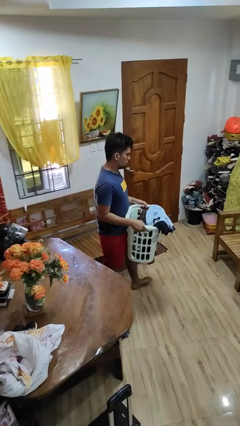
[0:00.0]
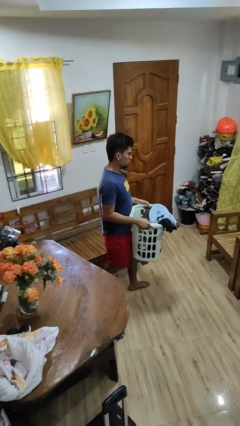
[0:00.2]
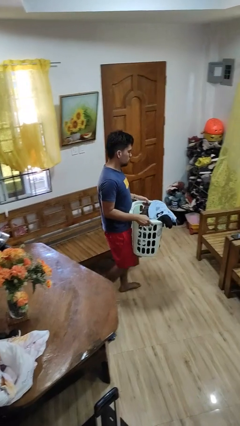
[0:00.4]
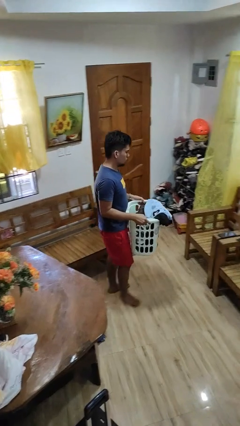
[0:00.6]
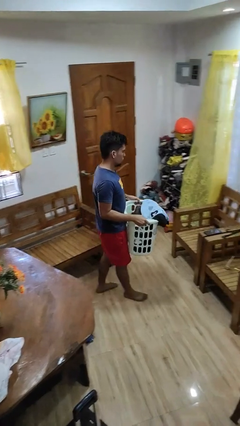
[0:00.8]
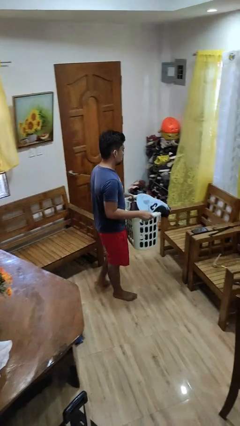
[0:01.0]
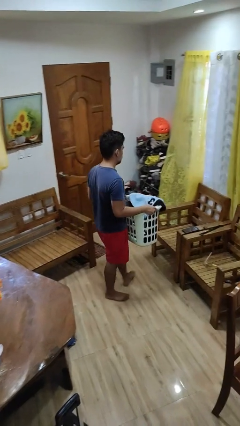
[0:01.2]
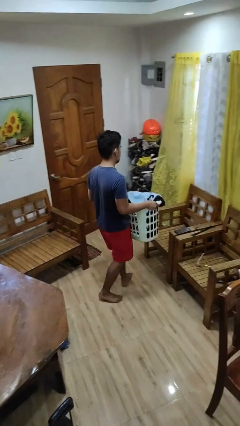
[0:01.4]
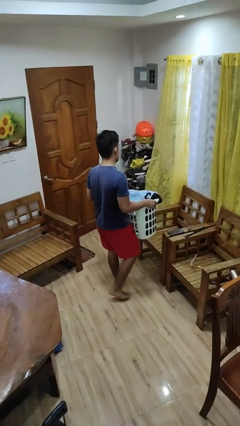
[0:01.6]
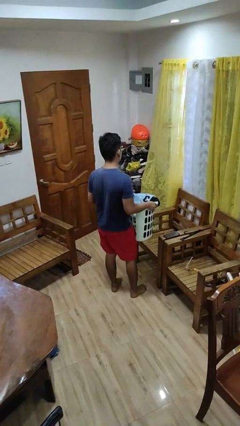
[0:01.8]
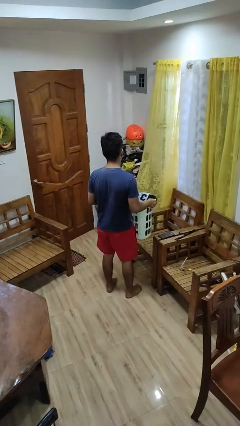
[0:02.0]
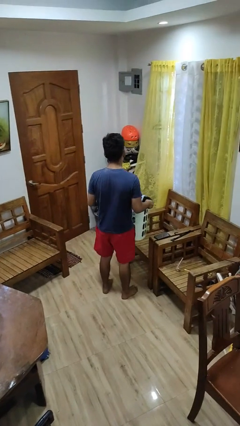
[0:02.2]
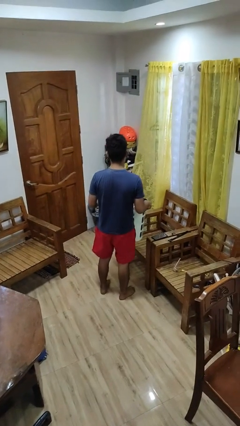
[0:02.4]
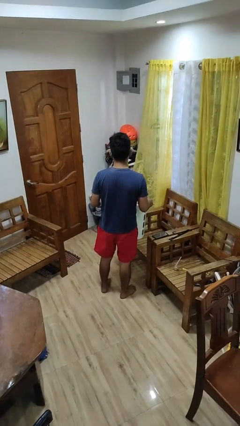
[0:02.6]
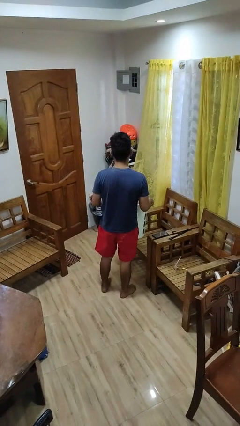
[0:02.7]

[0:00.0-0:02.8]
person carries laundry basket

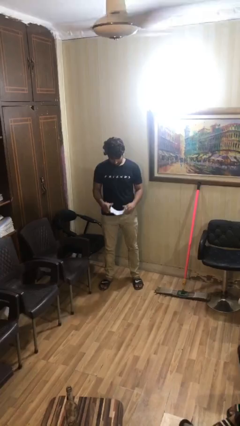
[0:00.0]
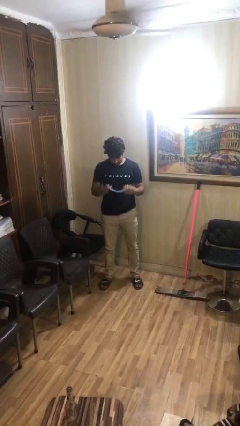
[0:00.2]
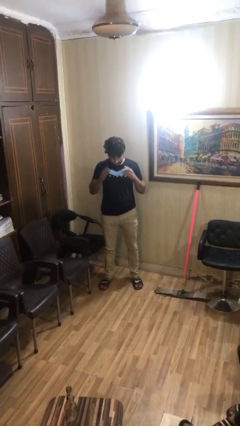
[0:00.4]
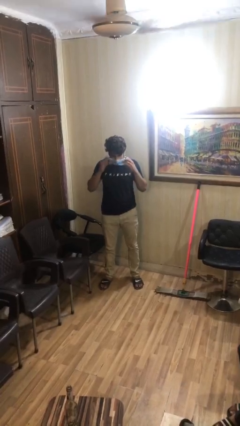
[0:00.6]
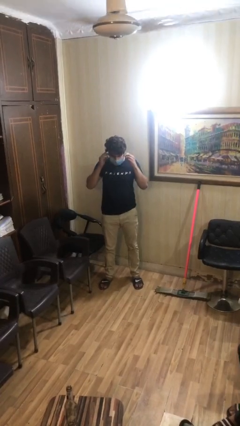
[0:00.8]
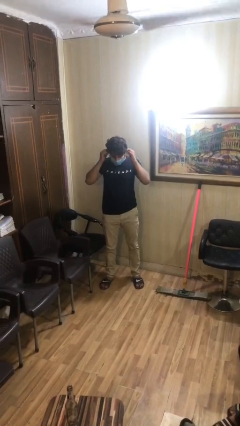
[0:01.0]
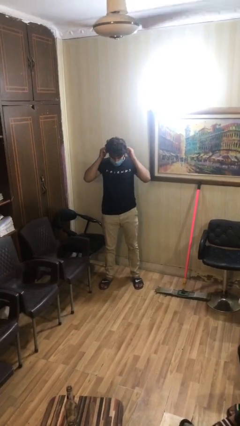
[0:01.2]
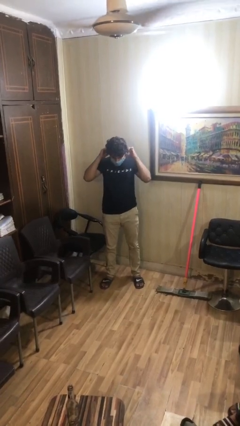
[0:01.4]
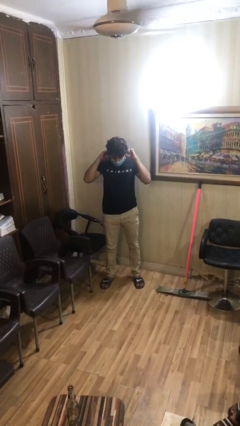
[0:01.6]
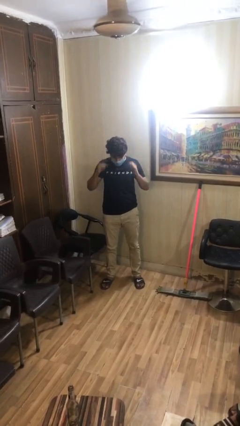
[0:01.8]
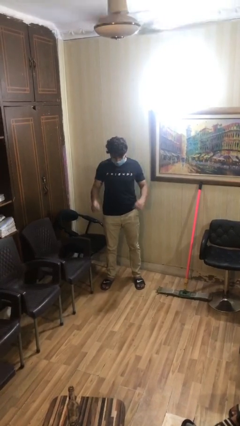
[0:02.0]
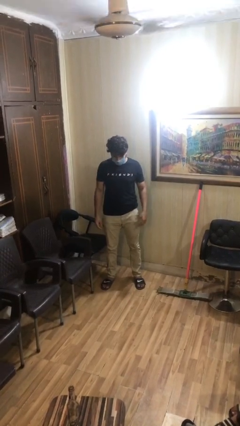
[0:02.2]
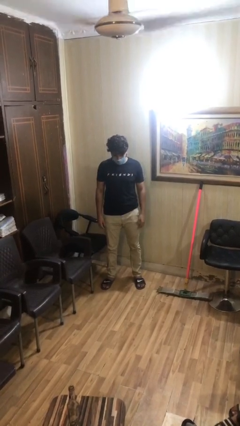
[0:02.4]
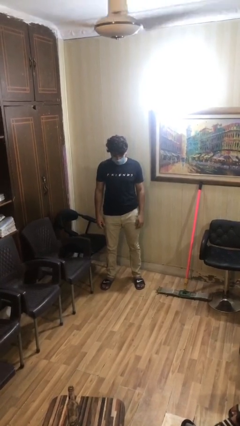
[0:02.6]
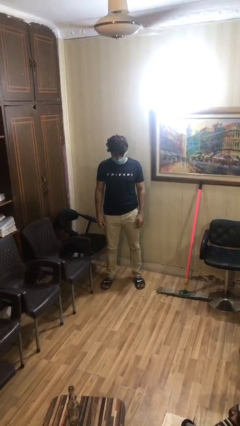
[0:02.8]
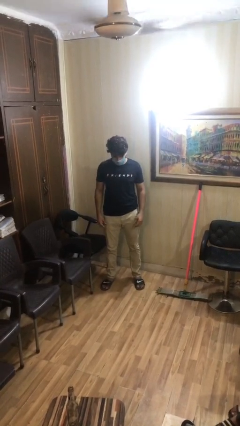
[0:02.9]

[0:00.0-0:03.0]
person puts on facemask

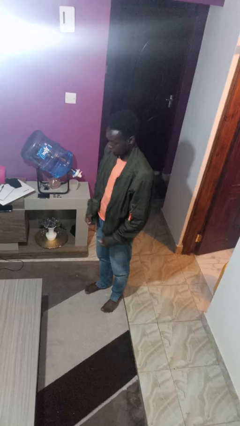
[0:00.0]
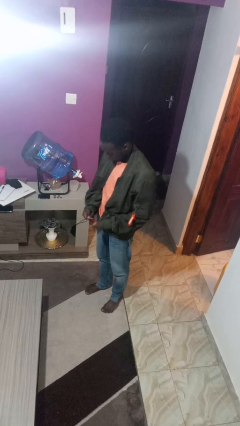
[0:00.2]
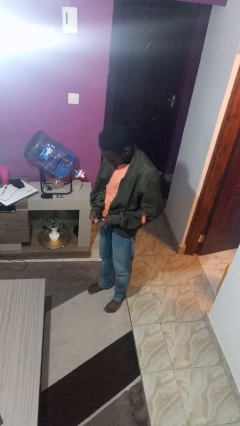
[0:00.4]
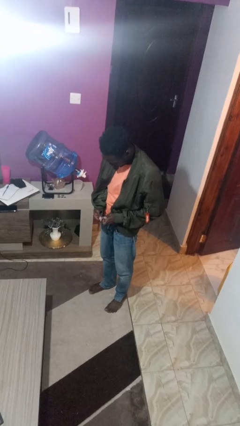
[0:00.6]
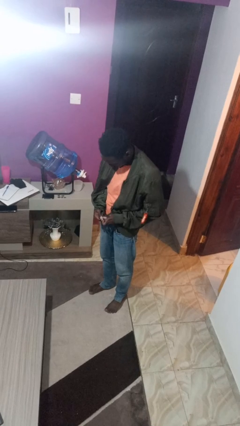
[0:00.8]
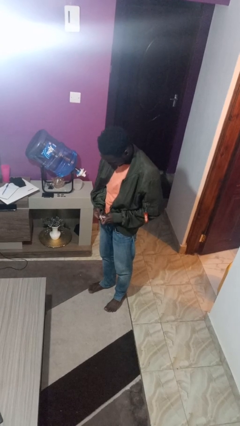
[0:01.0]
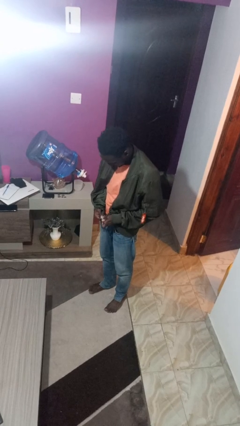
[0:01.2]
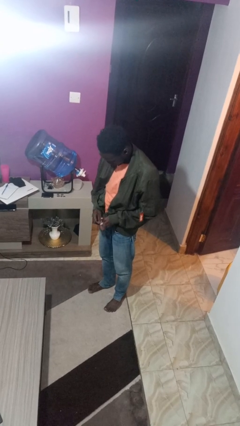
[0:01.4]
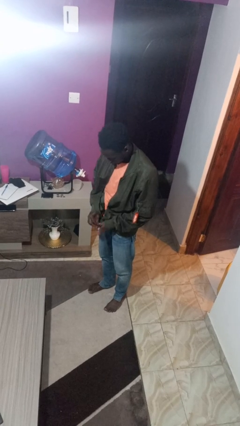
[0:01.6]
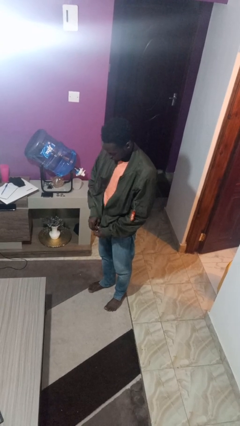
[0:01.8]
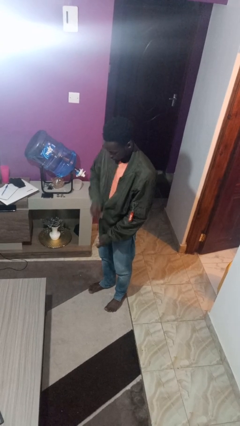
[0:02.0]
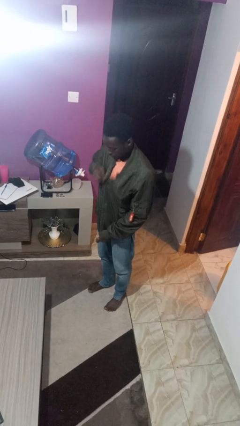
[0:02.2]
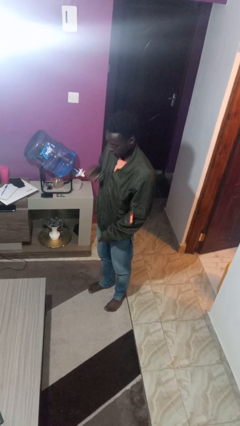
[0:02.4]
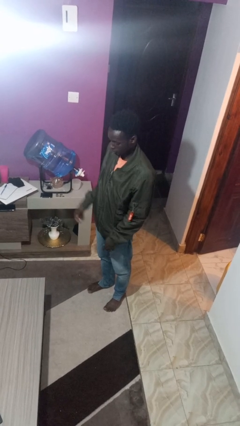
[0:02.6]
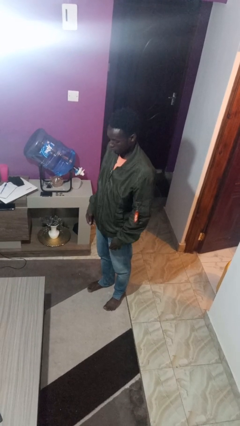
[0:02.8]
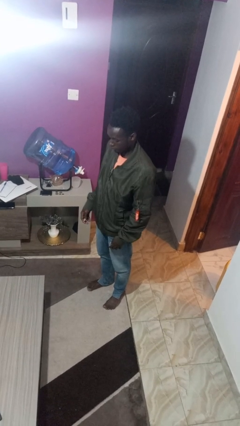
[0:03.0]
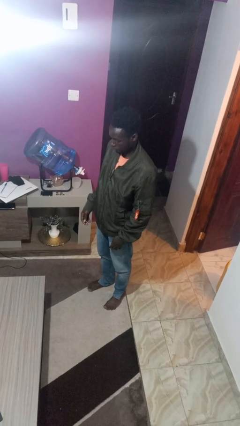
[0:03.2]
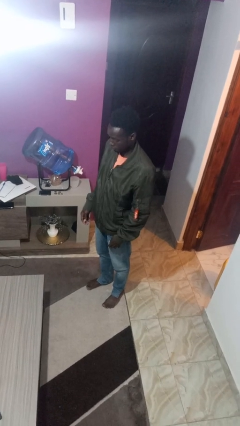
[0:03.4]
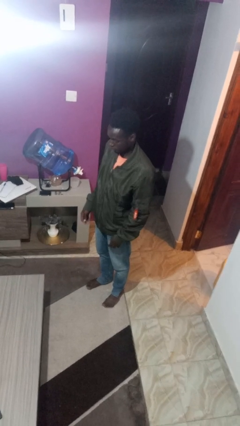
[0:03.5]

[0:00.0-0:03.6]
person zips up jacket

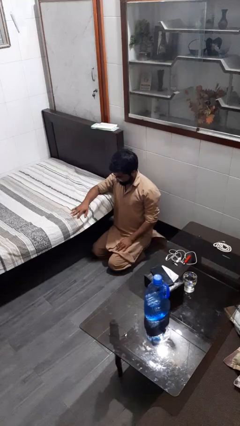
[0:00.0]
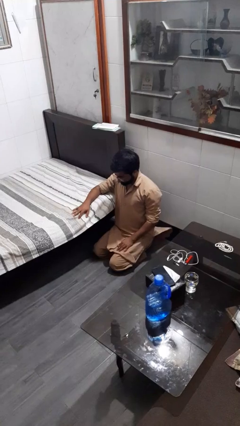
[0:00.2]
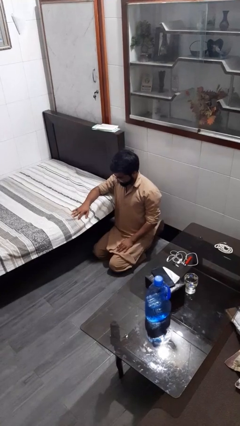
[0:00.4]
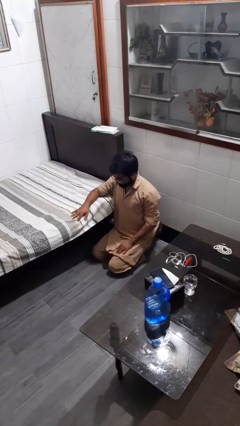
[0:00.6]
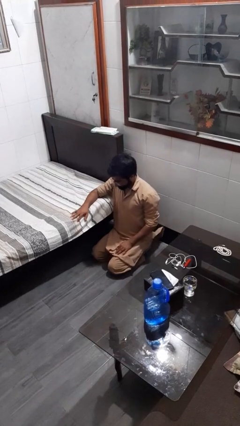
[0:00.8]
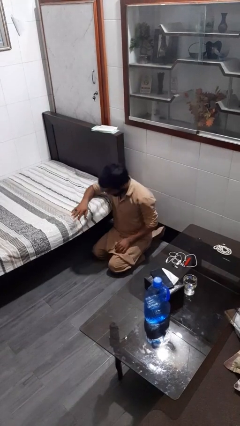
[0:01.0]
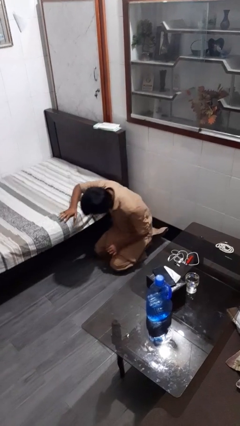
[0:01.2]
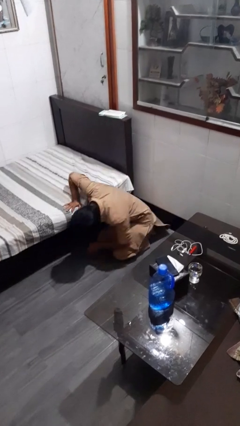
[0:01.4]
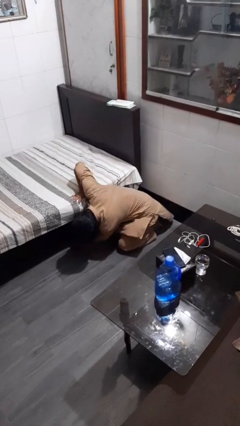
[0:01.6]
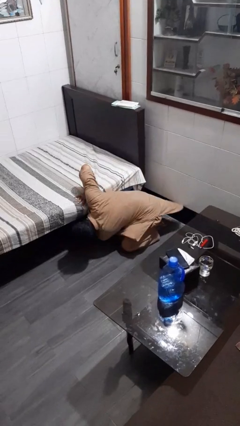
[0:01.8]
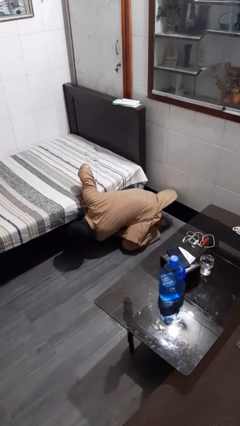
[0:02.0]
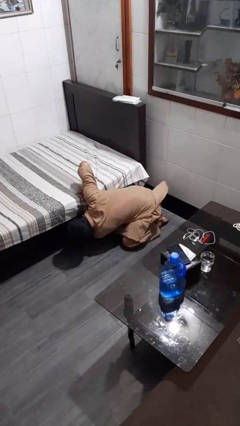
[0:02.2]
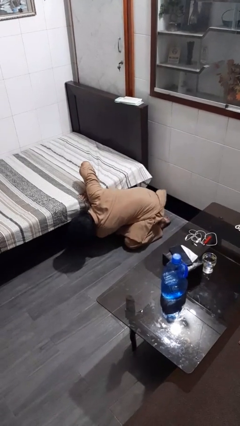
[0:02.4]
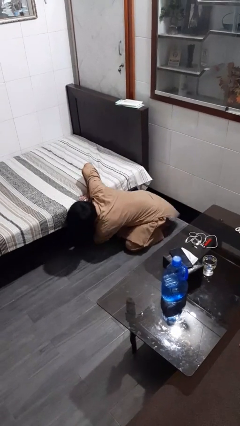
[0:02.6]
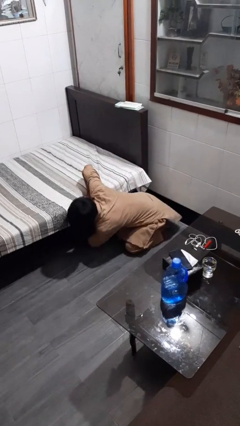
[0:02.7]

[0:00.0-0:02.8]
person searches under bed

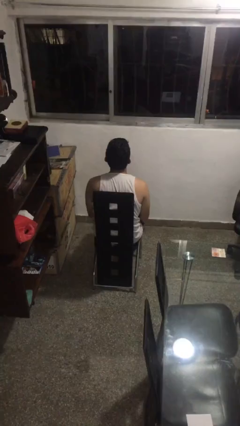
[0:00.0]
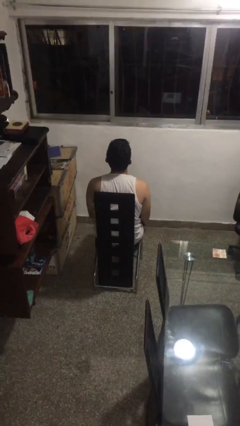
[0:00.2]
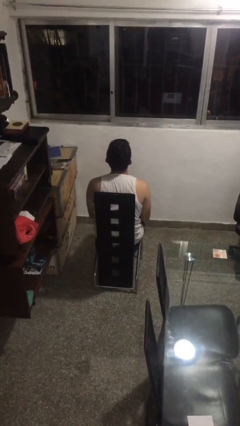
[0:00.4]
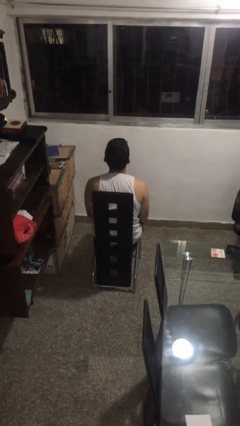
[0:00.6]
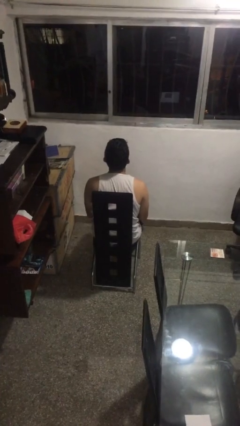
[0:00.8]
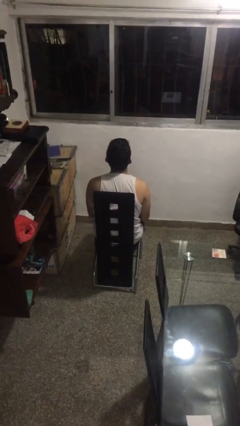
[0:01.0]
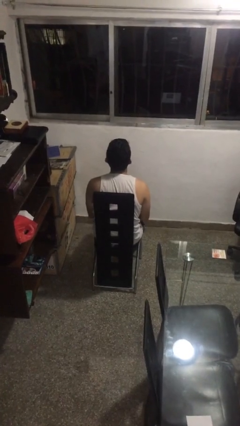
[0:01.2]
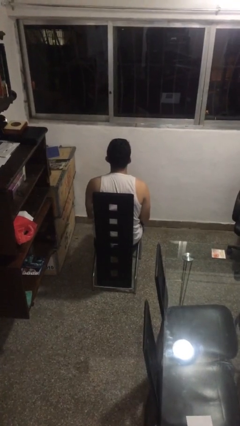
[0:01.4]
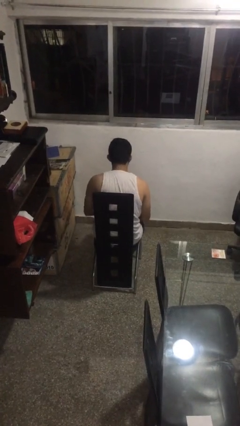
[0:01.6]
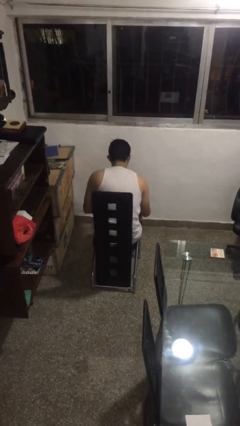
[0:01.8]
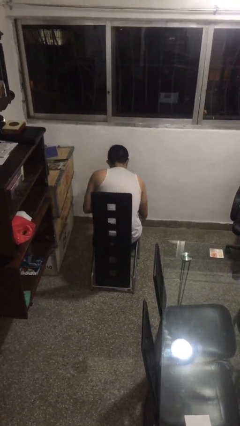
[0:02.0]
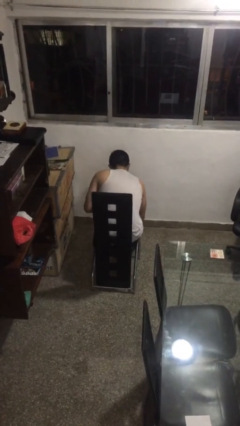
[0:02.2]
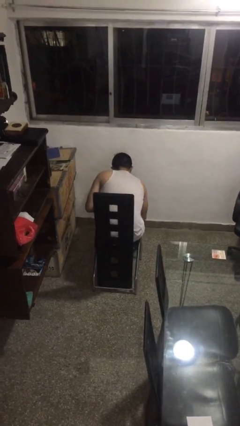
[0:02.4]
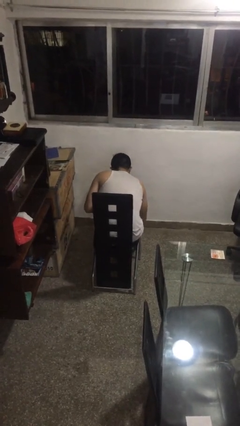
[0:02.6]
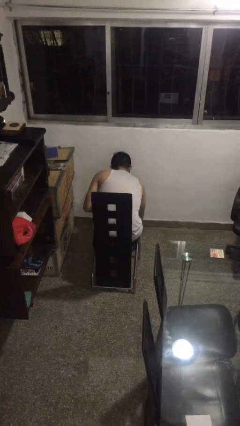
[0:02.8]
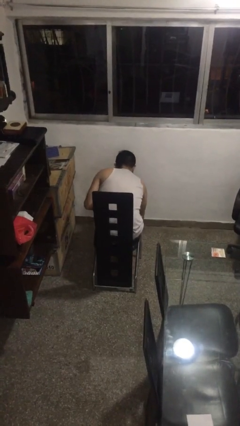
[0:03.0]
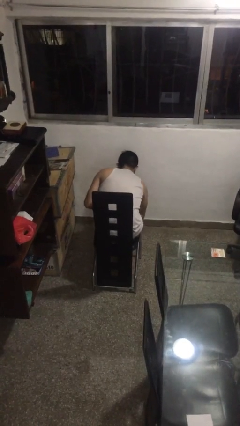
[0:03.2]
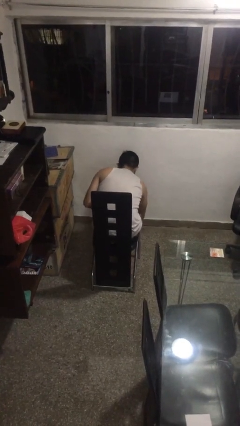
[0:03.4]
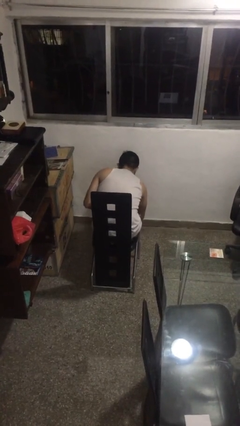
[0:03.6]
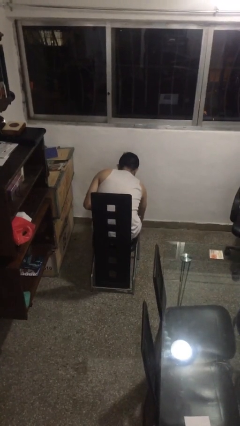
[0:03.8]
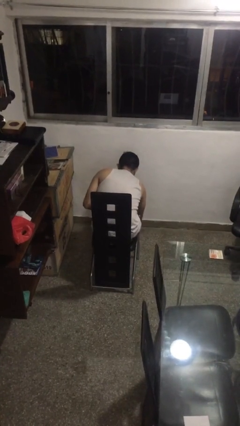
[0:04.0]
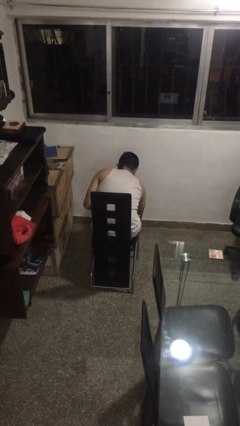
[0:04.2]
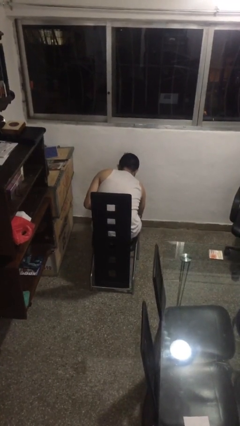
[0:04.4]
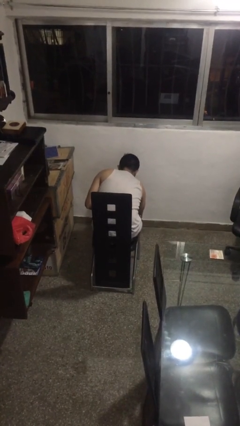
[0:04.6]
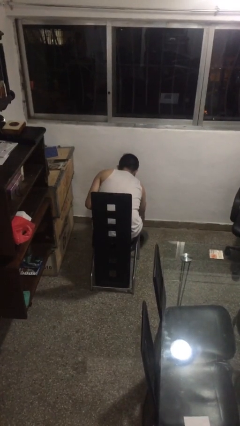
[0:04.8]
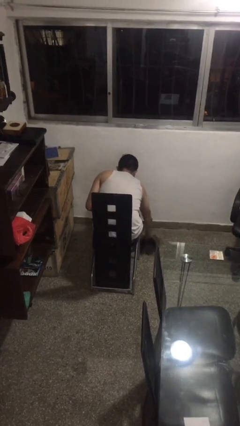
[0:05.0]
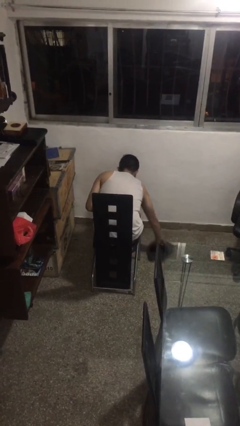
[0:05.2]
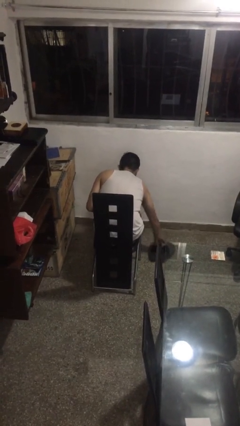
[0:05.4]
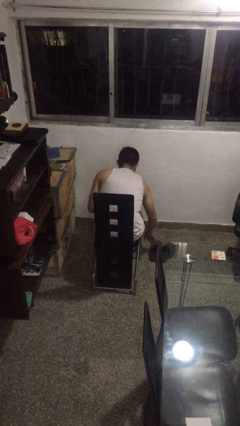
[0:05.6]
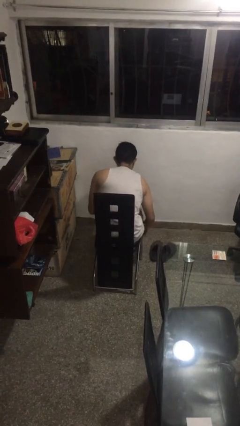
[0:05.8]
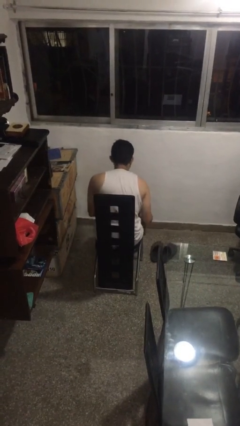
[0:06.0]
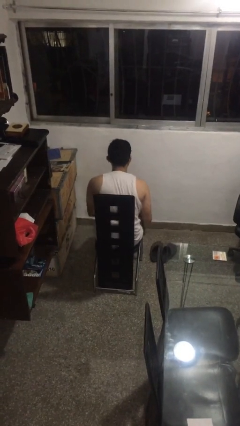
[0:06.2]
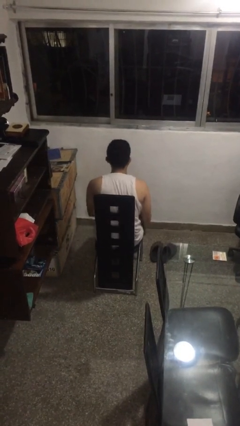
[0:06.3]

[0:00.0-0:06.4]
person takes off shoes
